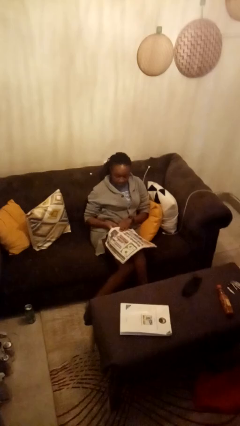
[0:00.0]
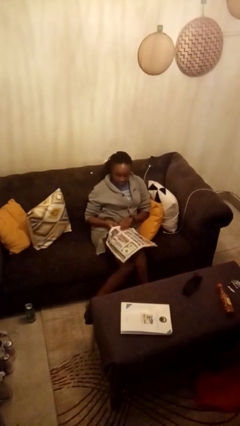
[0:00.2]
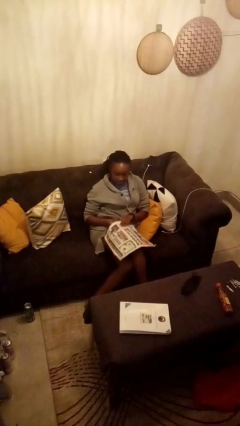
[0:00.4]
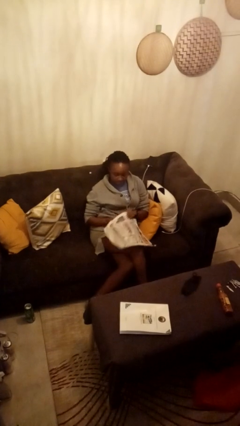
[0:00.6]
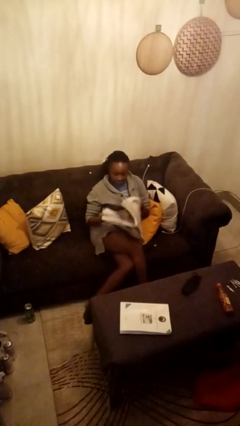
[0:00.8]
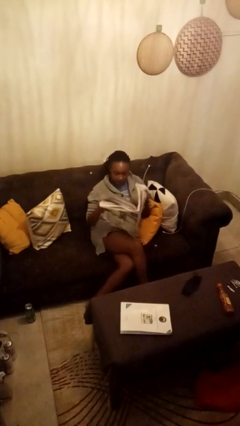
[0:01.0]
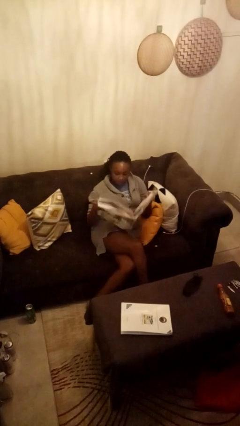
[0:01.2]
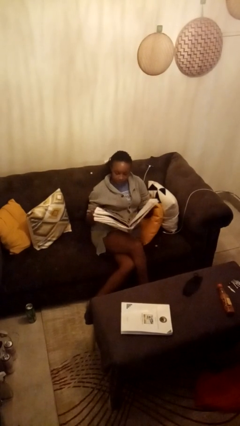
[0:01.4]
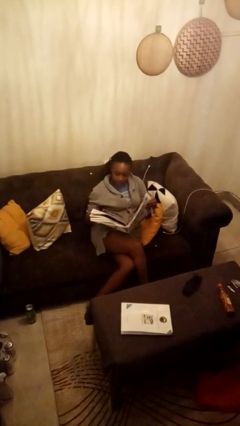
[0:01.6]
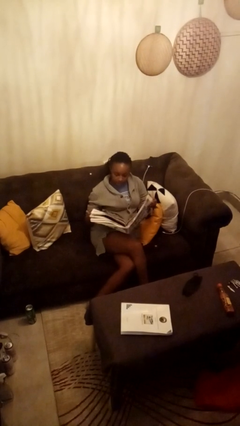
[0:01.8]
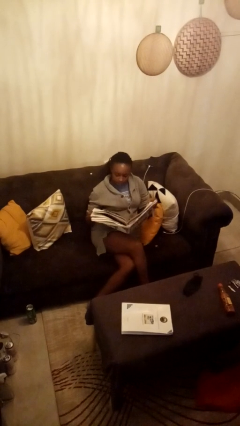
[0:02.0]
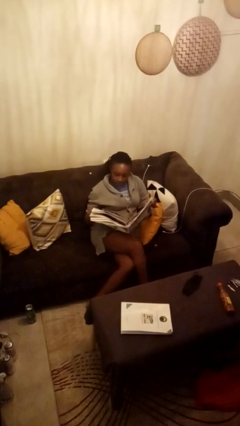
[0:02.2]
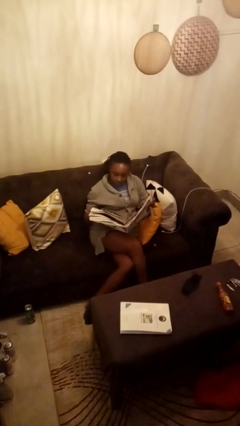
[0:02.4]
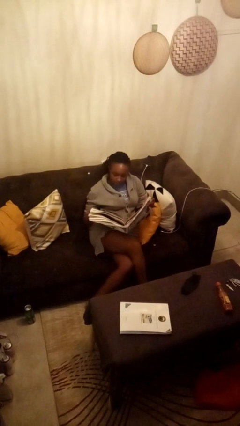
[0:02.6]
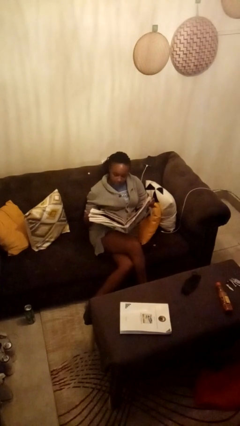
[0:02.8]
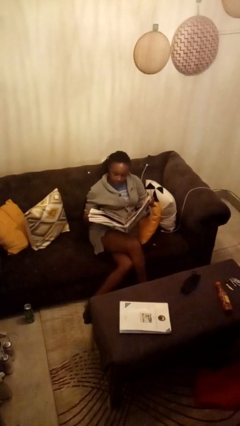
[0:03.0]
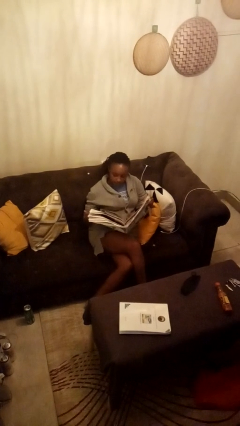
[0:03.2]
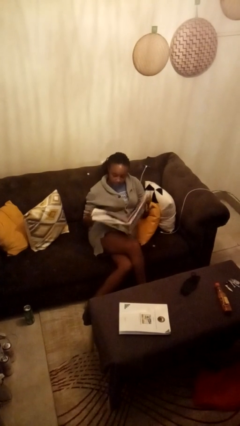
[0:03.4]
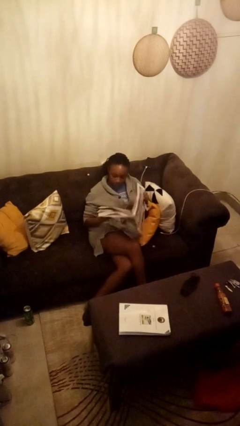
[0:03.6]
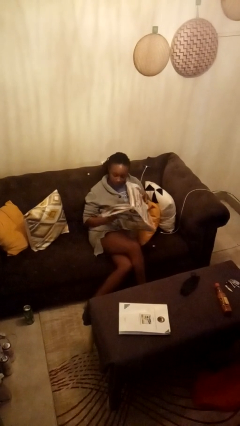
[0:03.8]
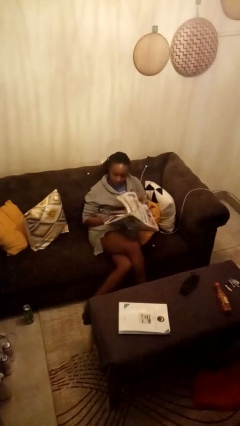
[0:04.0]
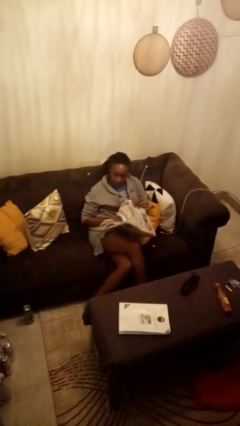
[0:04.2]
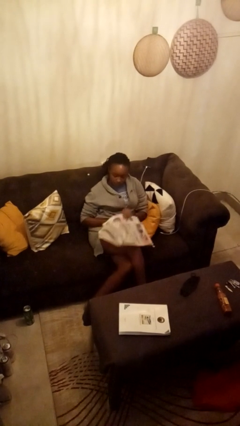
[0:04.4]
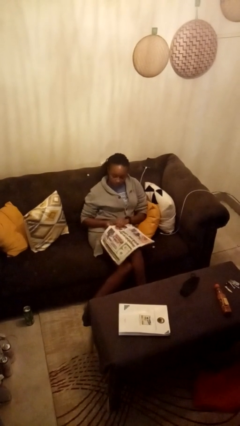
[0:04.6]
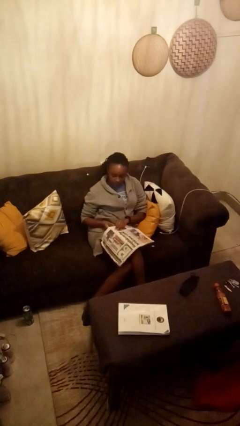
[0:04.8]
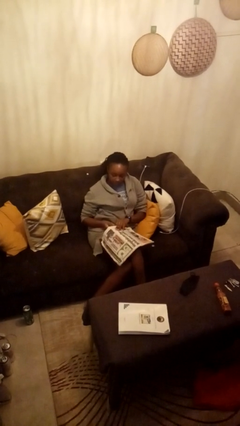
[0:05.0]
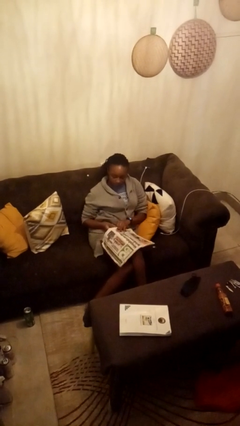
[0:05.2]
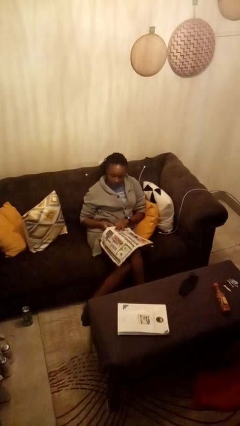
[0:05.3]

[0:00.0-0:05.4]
person reads newspaper

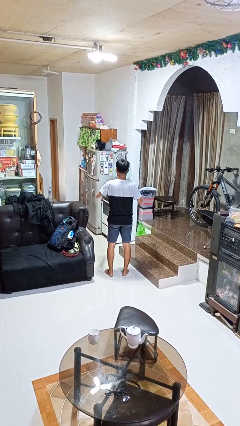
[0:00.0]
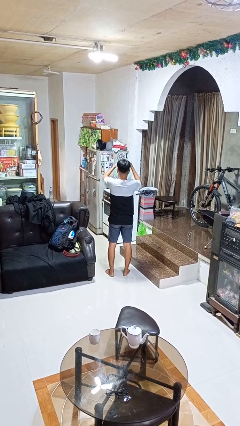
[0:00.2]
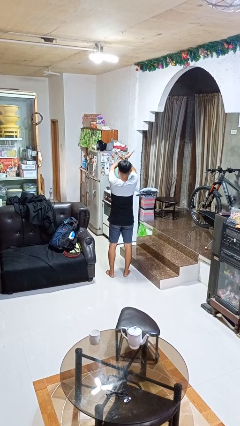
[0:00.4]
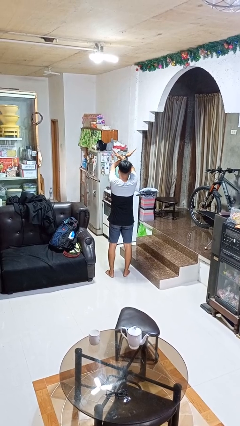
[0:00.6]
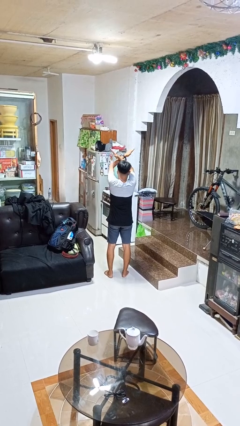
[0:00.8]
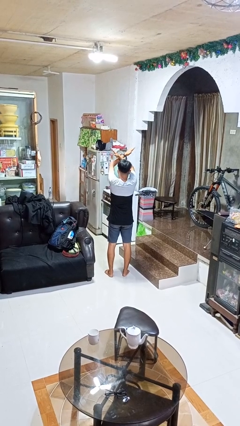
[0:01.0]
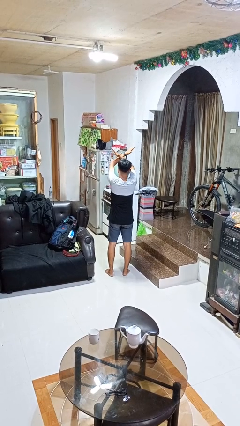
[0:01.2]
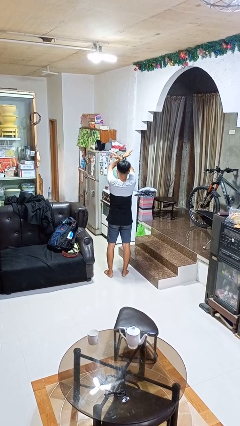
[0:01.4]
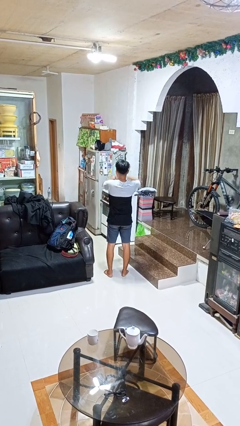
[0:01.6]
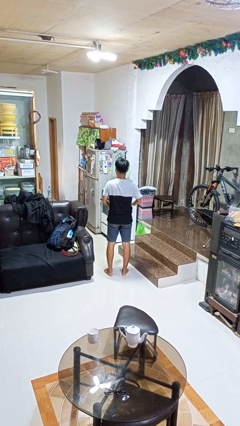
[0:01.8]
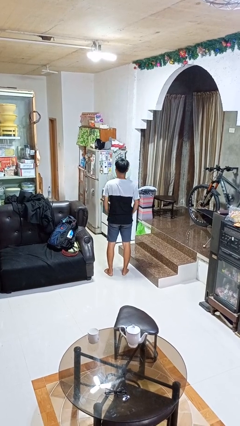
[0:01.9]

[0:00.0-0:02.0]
person gestures arms x

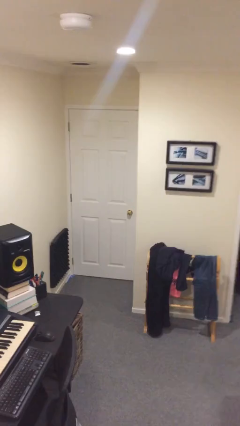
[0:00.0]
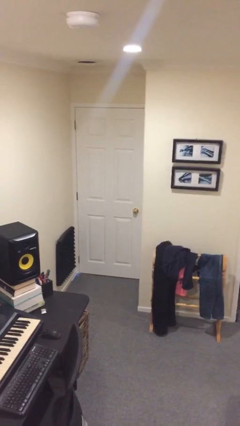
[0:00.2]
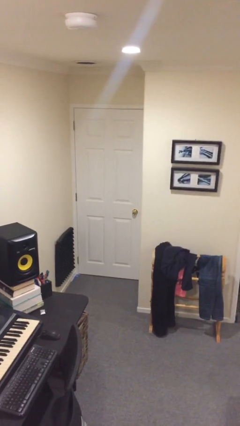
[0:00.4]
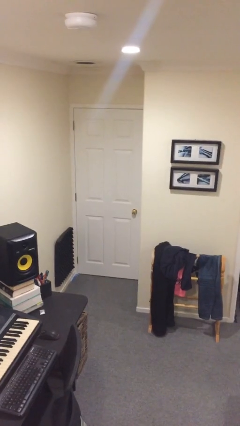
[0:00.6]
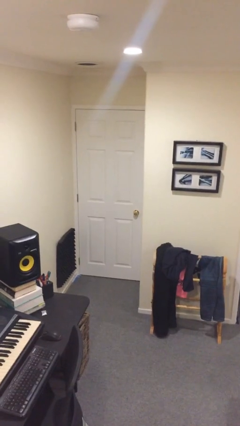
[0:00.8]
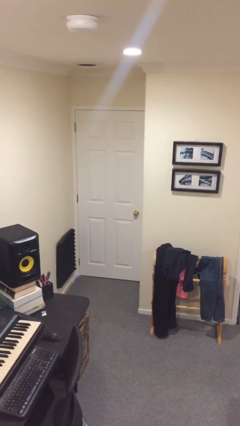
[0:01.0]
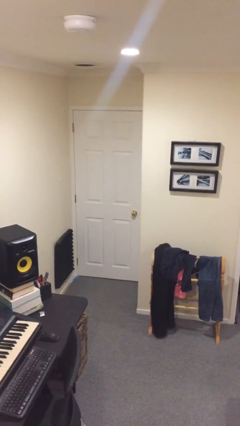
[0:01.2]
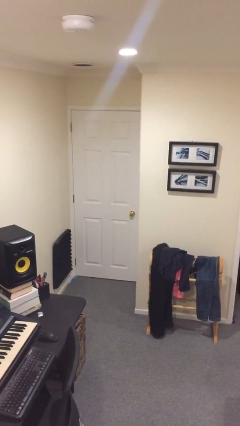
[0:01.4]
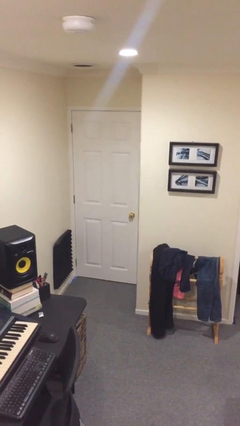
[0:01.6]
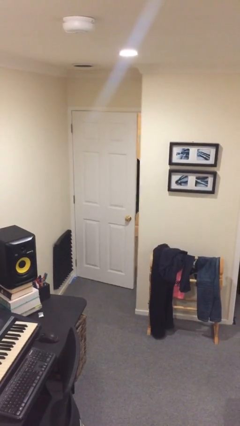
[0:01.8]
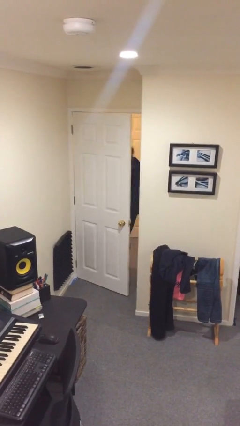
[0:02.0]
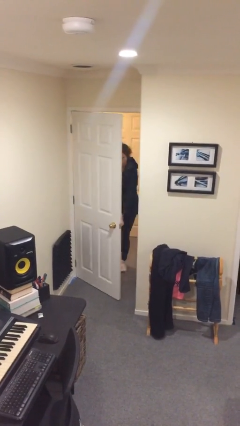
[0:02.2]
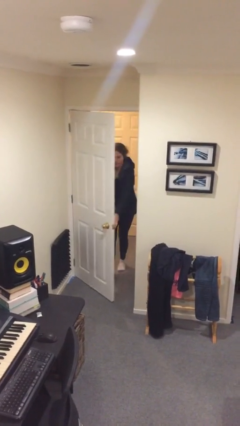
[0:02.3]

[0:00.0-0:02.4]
person opens facility door

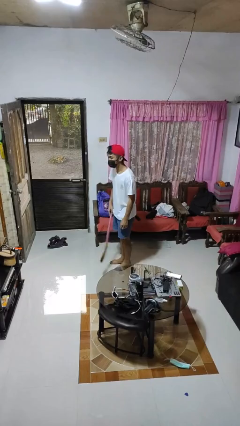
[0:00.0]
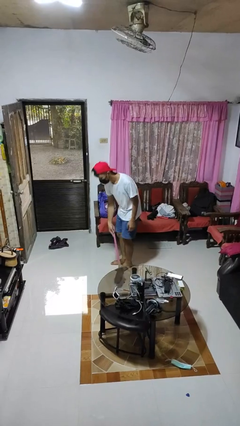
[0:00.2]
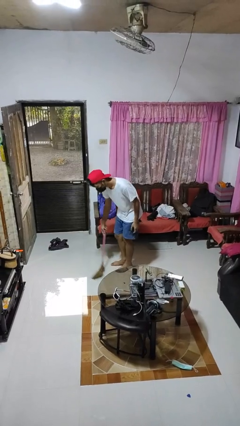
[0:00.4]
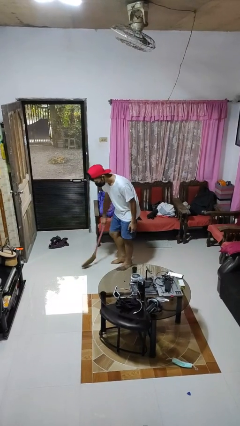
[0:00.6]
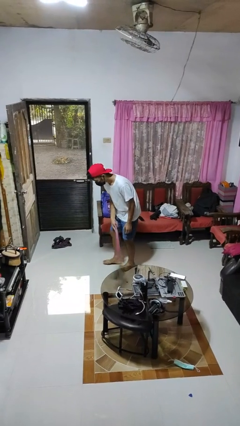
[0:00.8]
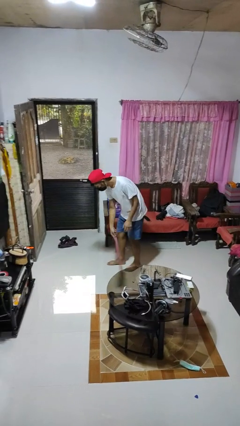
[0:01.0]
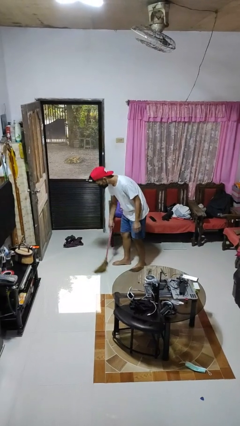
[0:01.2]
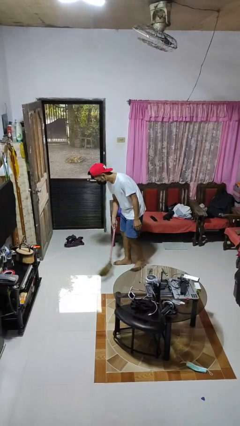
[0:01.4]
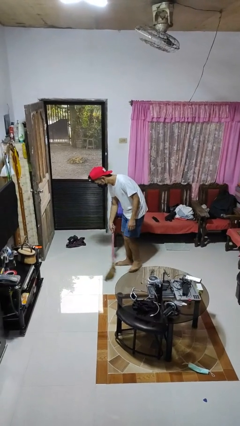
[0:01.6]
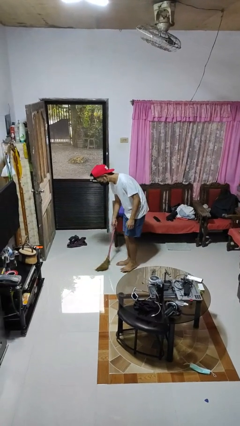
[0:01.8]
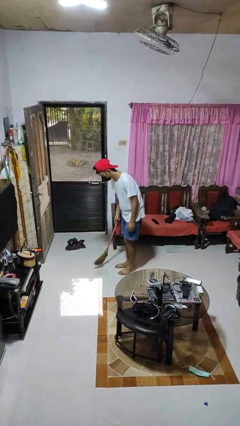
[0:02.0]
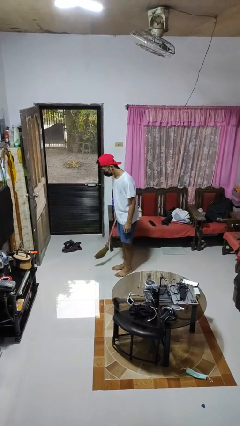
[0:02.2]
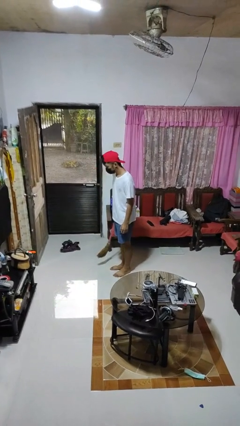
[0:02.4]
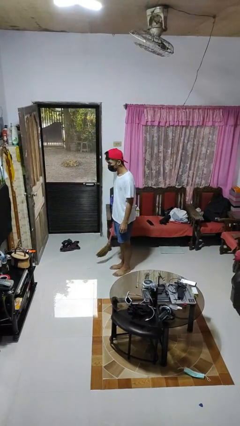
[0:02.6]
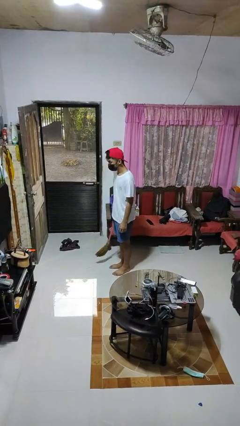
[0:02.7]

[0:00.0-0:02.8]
person sweeps floor

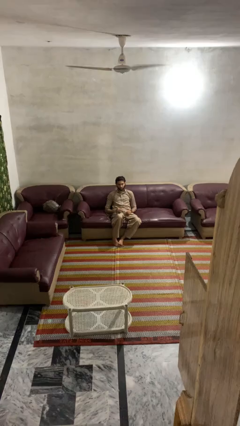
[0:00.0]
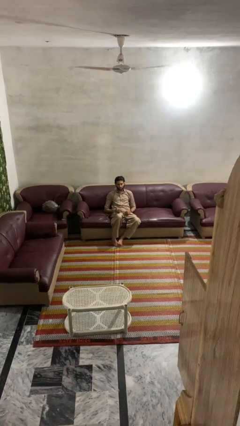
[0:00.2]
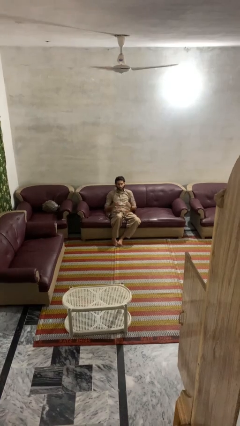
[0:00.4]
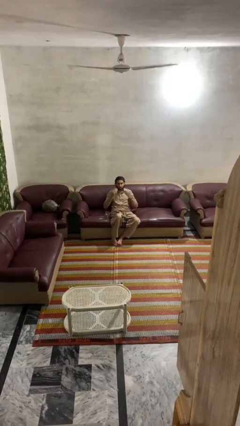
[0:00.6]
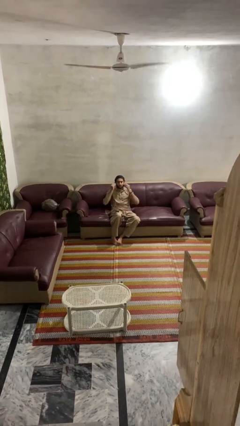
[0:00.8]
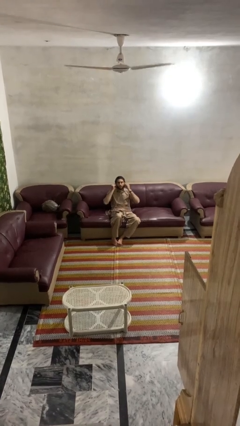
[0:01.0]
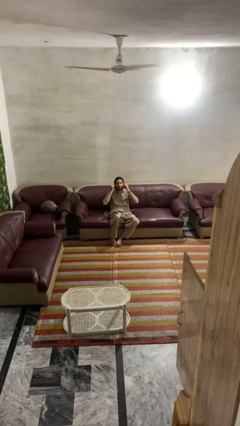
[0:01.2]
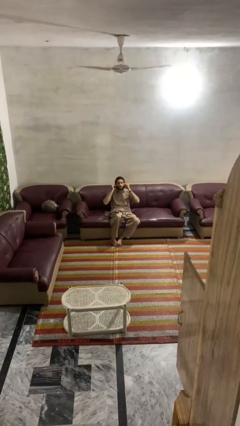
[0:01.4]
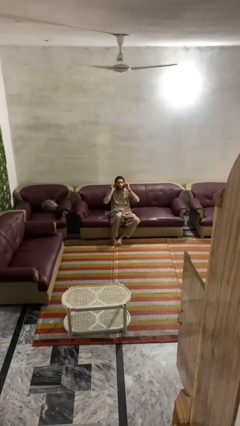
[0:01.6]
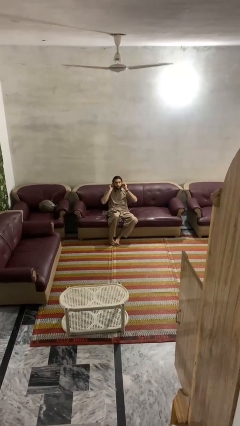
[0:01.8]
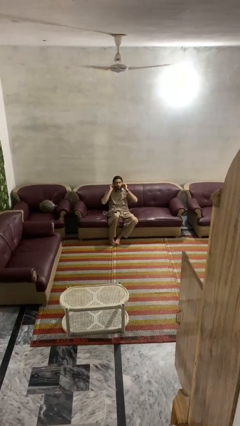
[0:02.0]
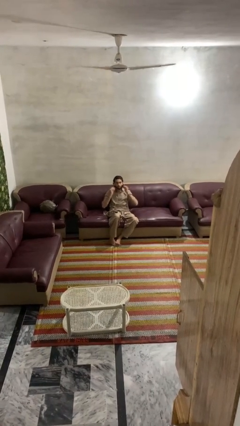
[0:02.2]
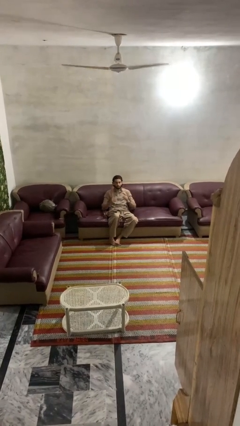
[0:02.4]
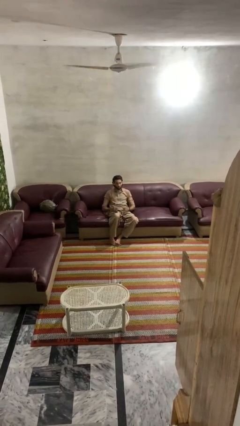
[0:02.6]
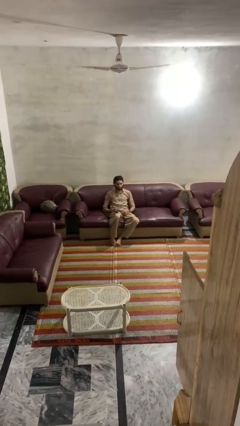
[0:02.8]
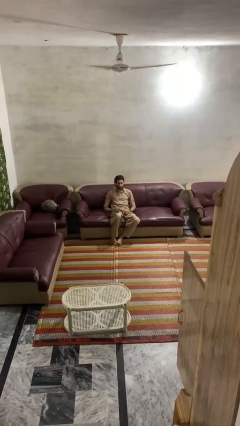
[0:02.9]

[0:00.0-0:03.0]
person puts on headphones

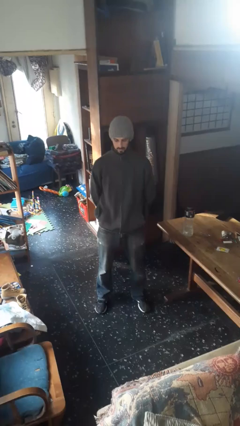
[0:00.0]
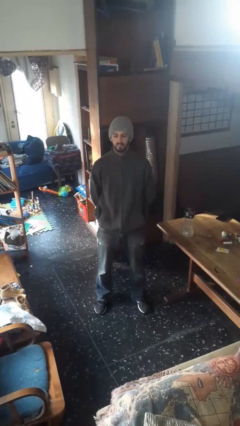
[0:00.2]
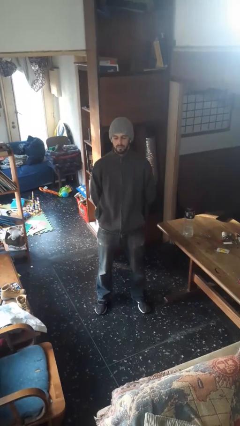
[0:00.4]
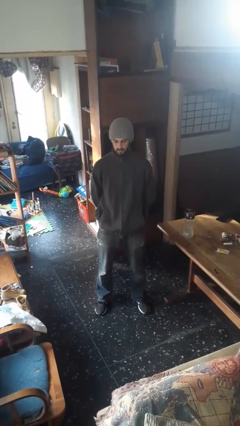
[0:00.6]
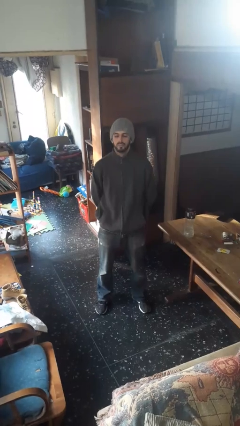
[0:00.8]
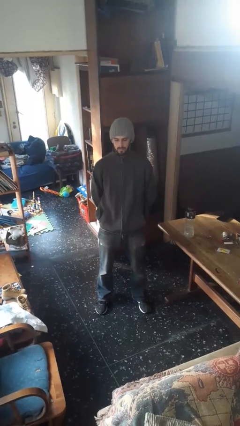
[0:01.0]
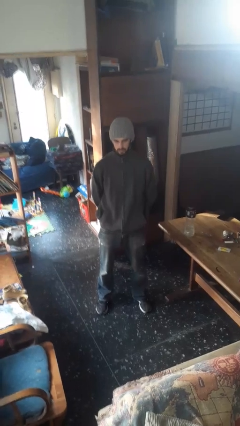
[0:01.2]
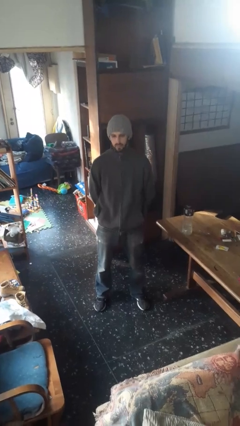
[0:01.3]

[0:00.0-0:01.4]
person nods head

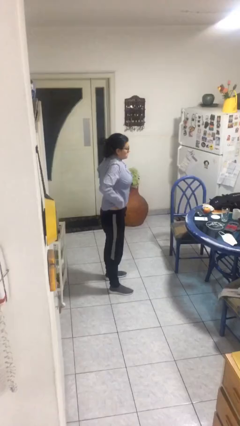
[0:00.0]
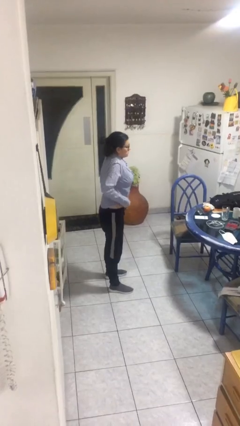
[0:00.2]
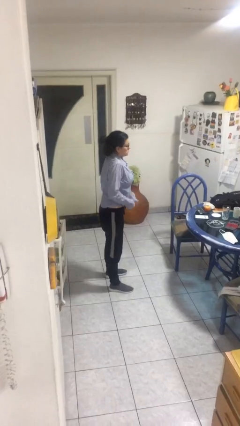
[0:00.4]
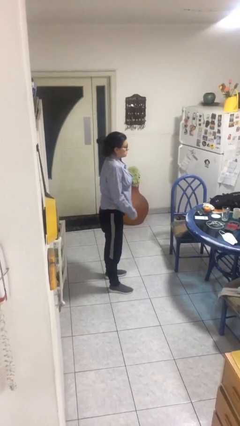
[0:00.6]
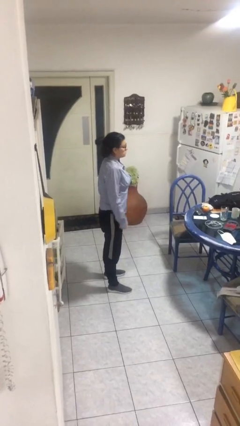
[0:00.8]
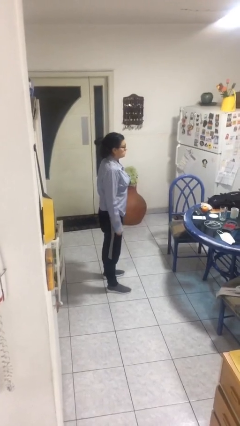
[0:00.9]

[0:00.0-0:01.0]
person untucks shirt
